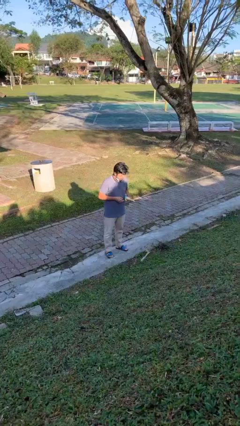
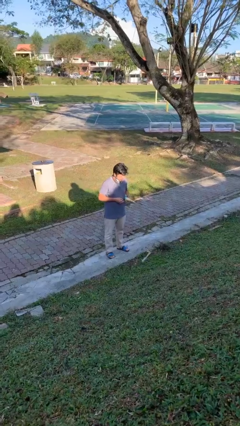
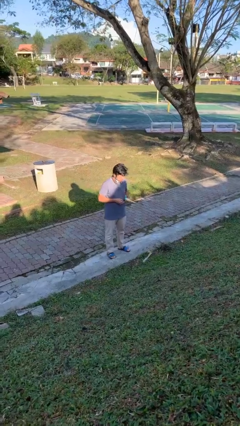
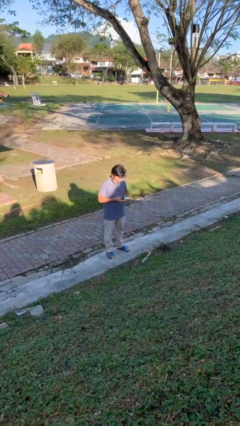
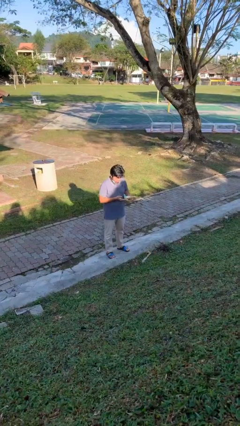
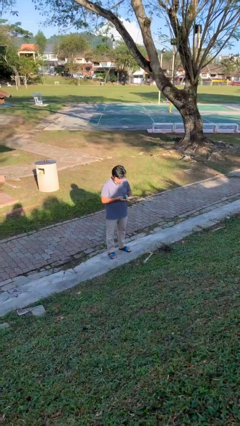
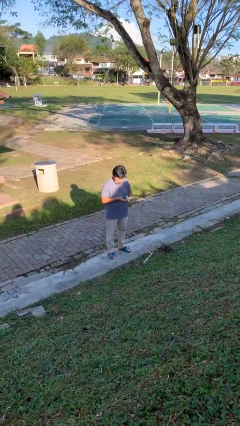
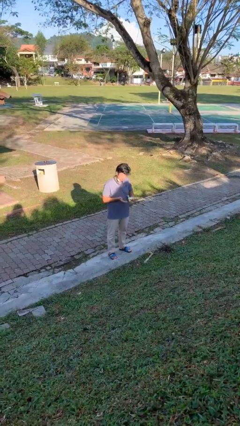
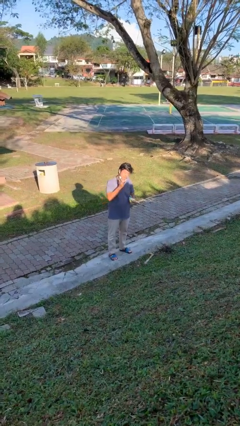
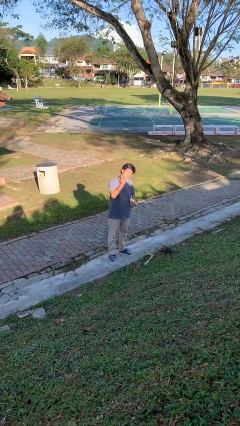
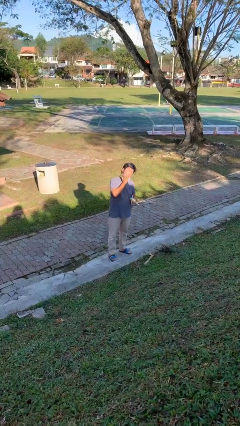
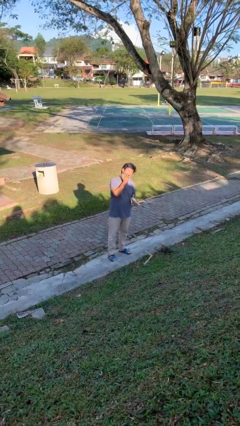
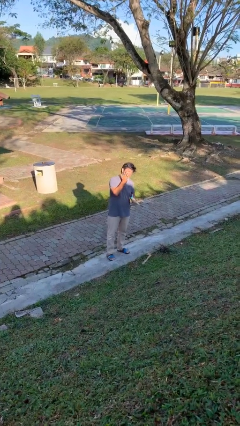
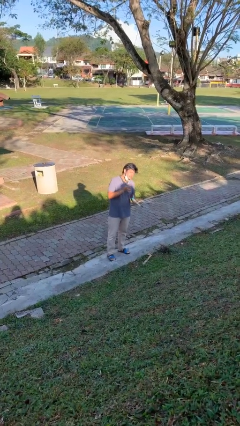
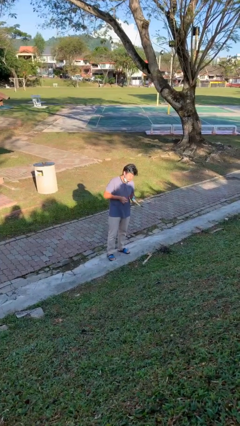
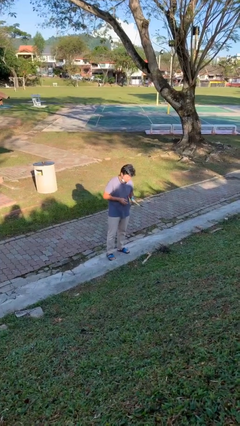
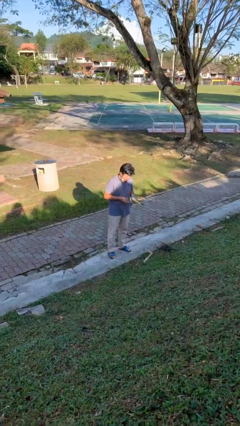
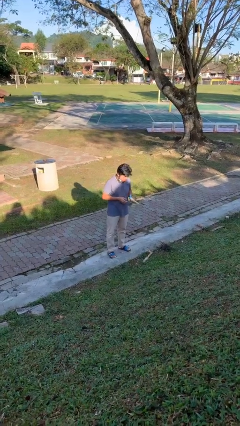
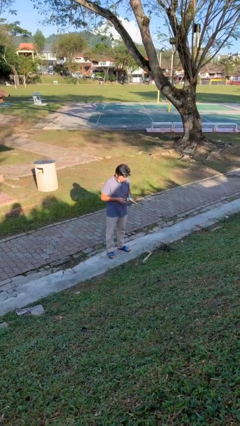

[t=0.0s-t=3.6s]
person applies facial moisturizer

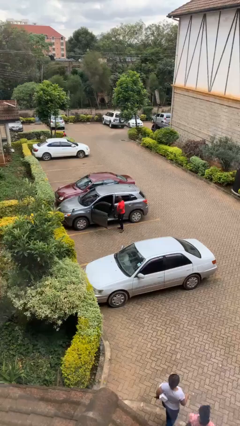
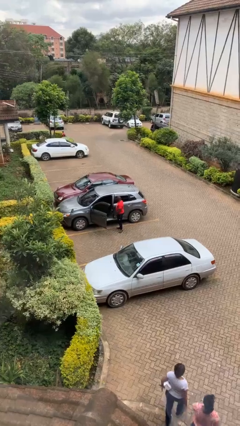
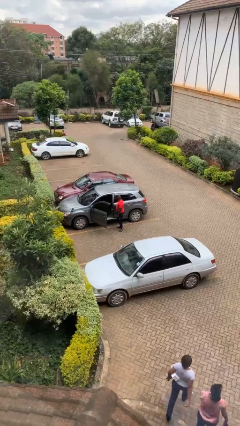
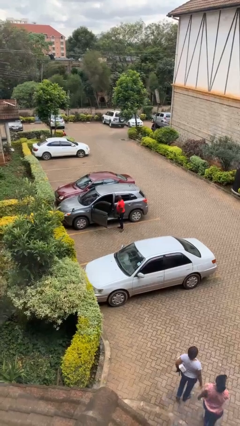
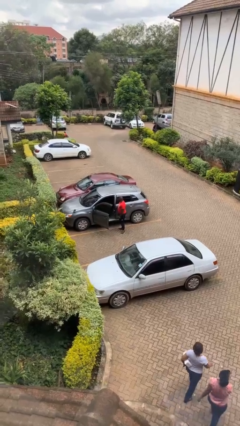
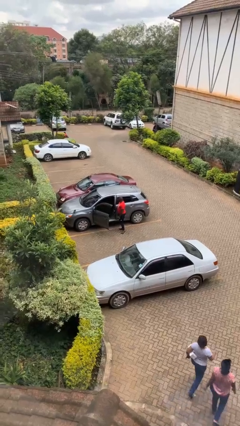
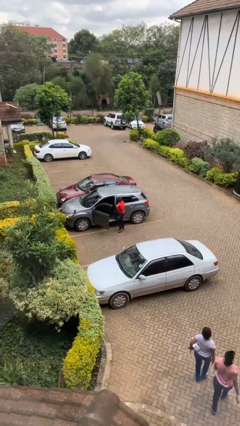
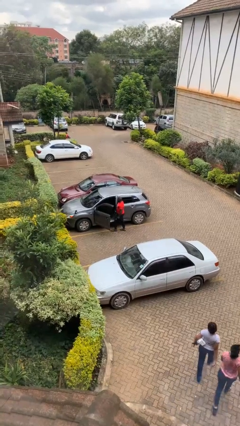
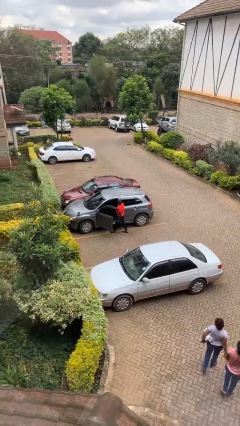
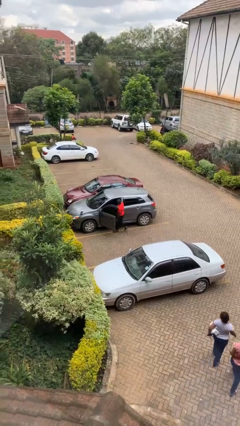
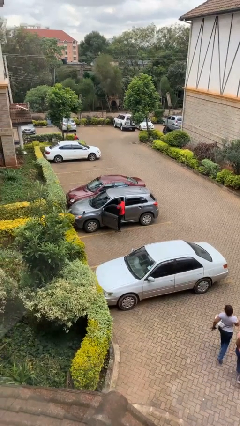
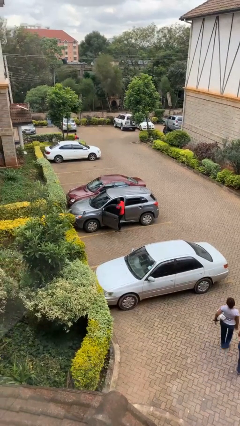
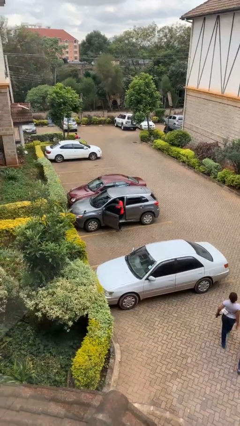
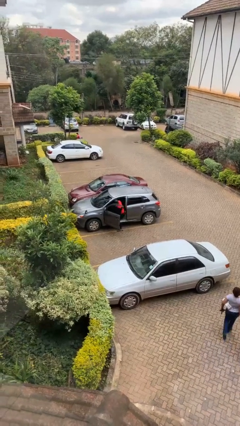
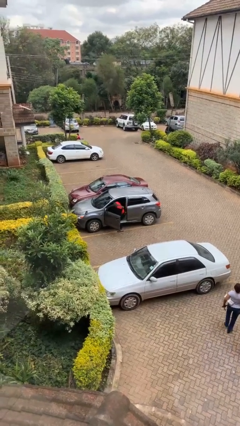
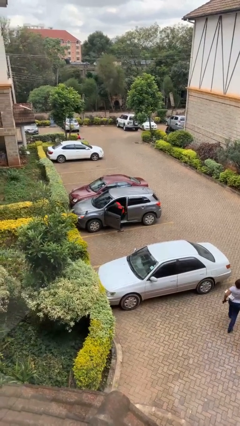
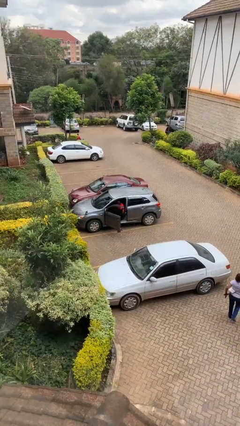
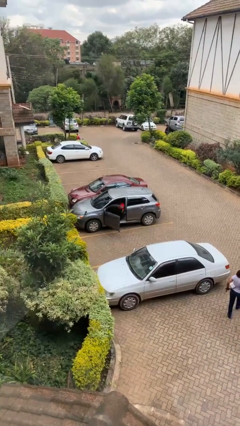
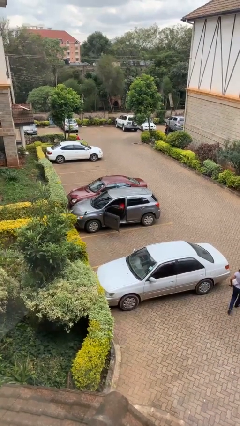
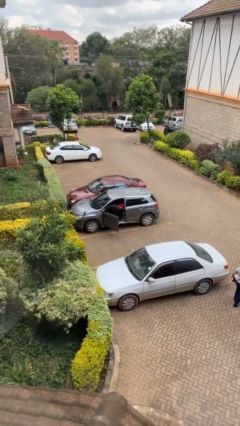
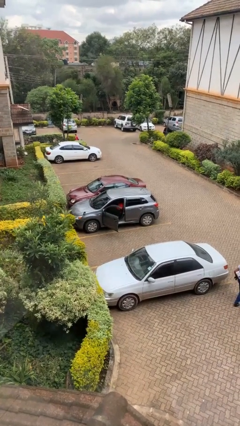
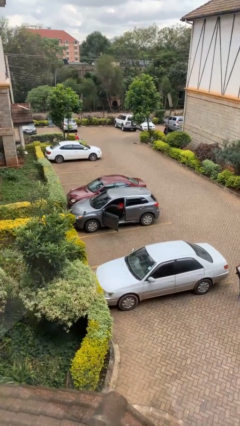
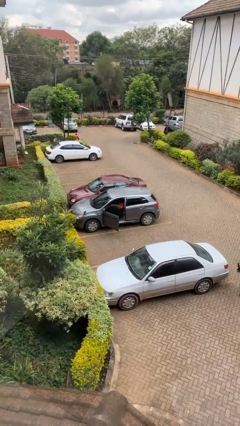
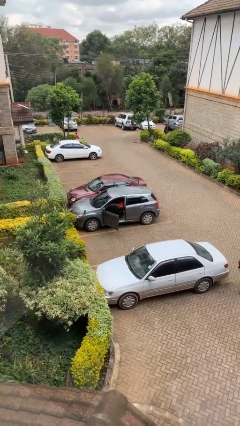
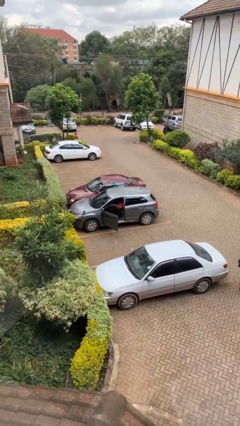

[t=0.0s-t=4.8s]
person enters car

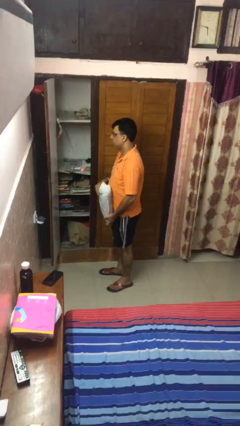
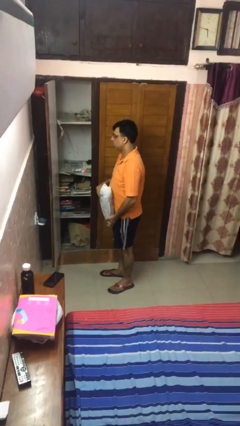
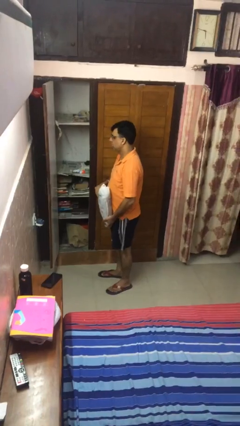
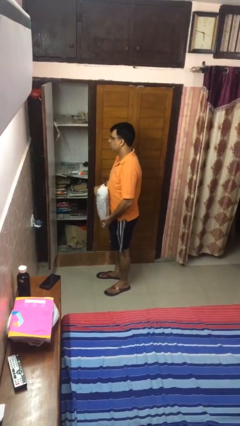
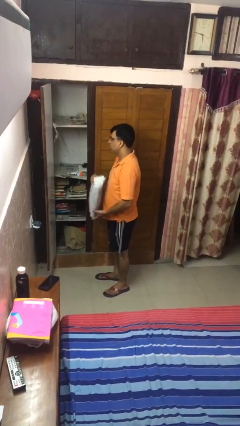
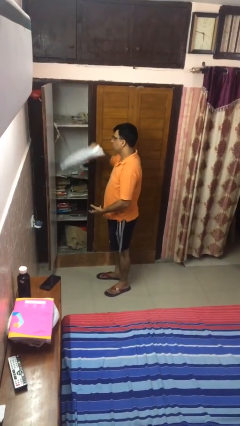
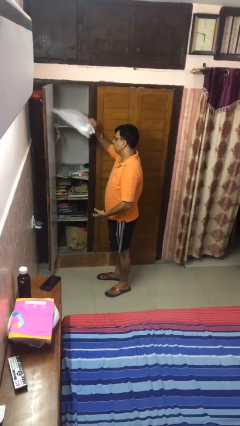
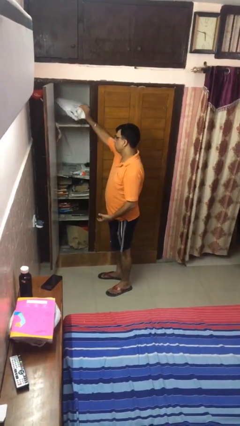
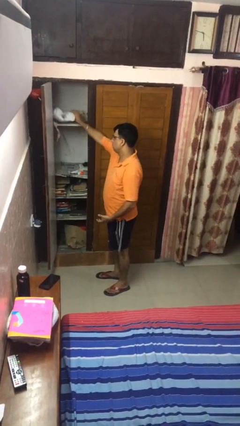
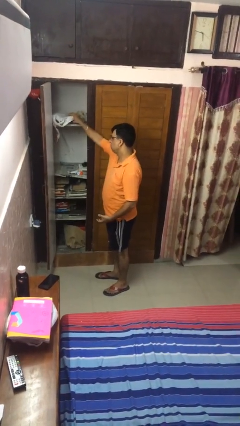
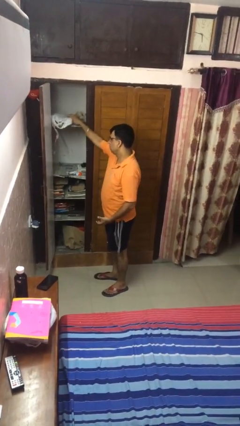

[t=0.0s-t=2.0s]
person puts down object on shelf

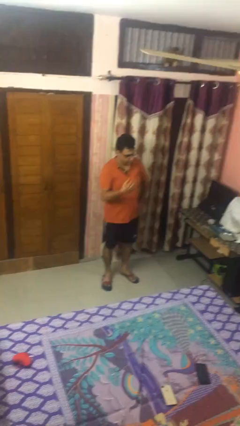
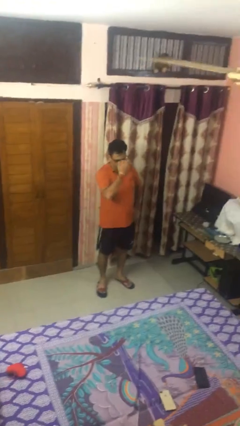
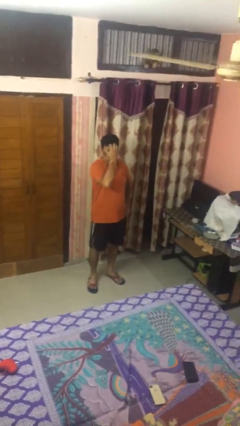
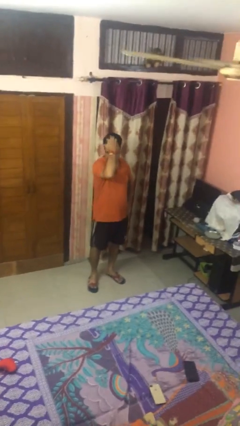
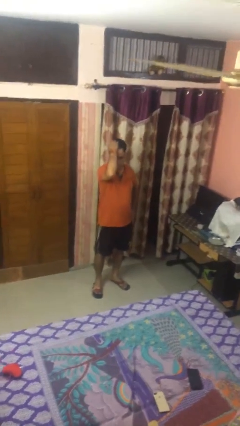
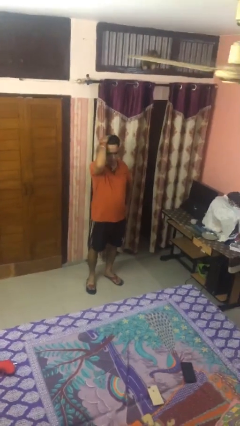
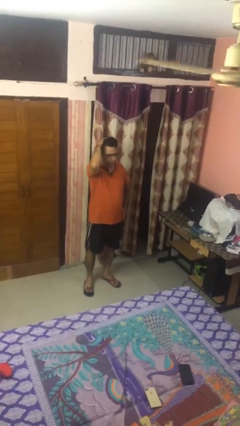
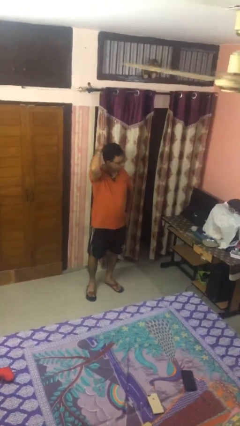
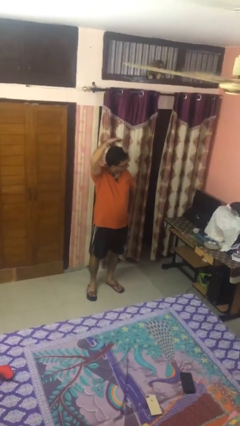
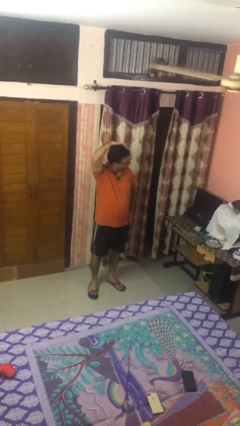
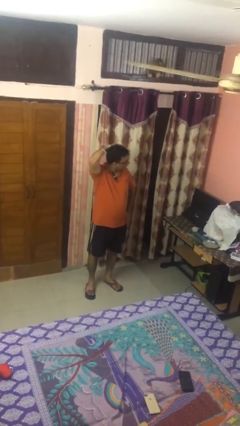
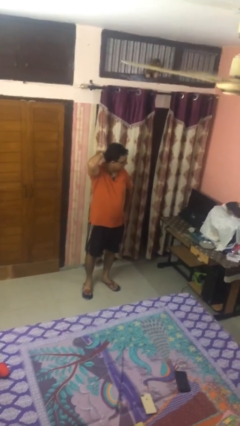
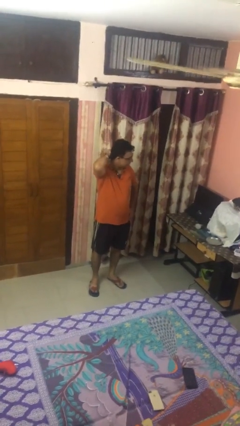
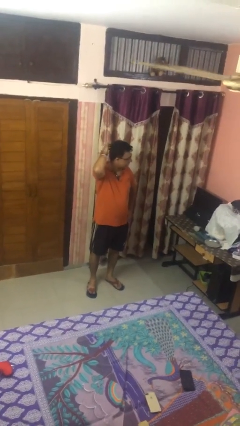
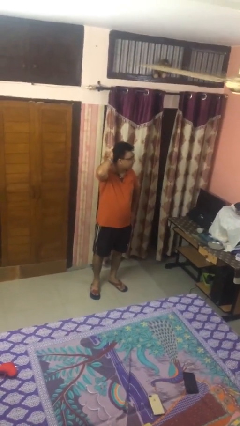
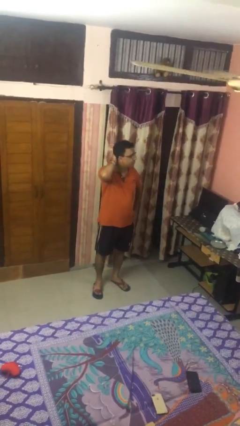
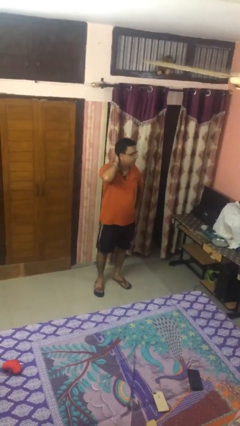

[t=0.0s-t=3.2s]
person strokes hair

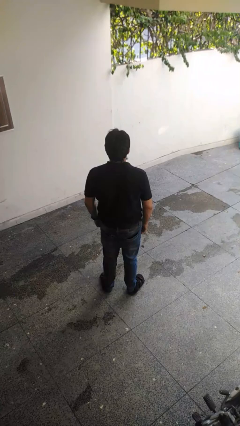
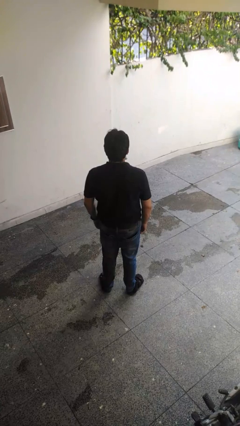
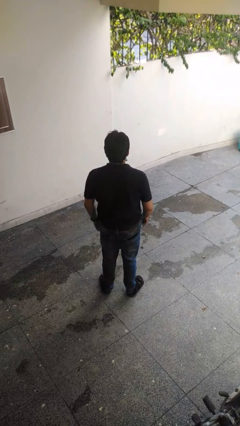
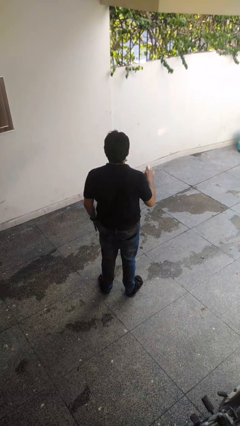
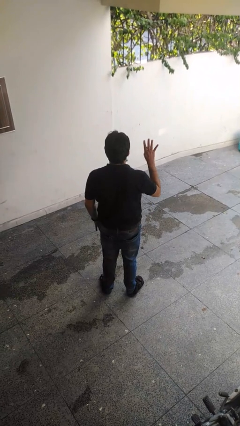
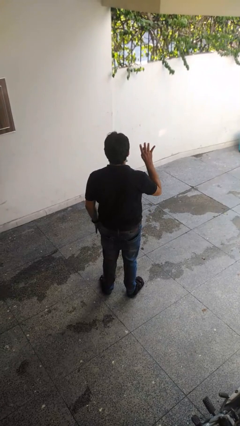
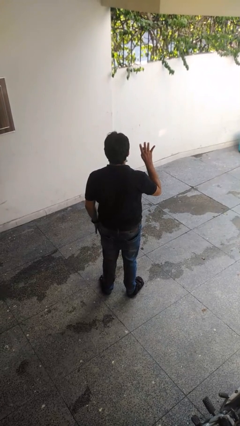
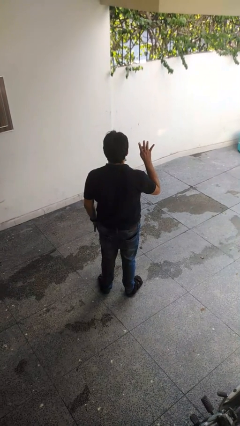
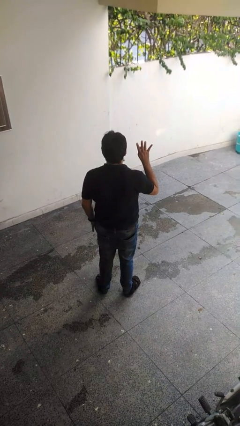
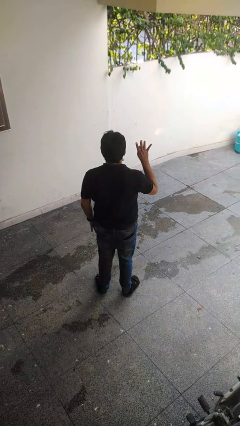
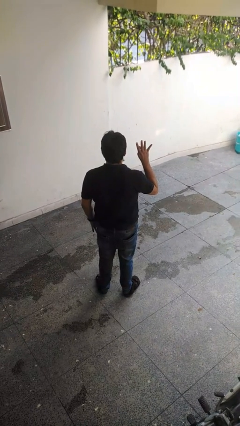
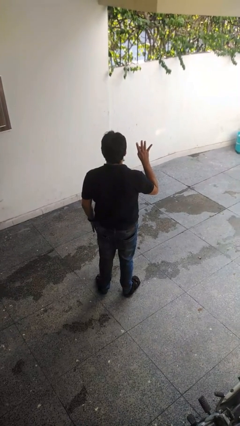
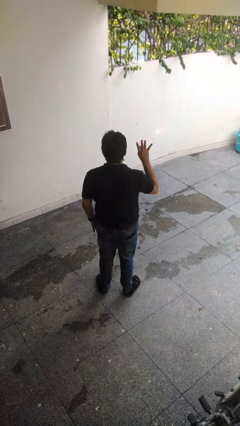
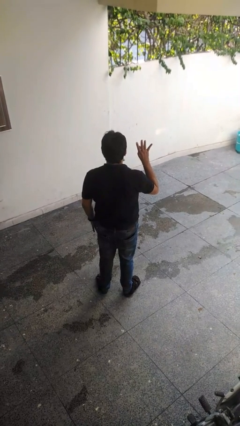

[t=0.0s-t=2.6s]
person gestures number four

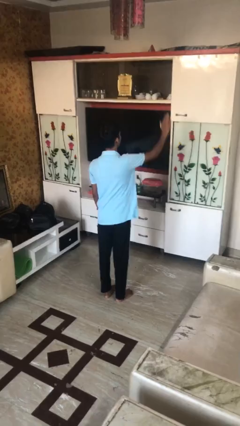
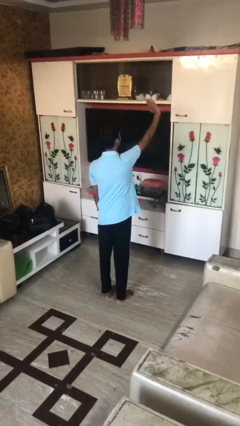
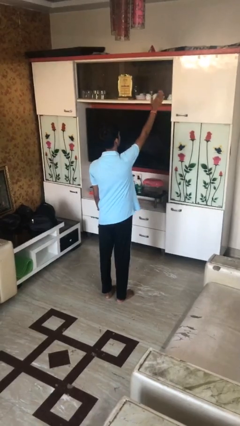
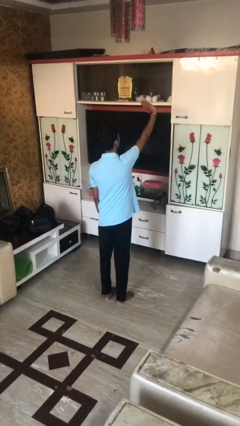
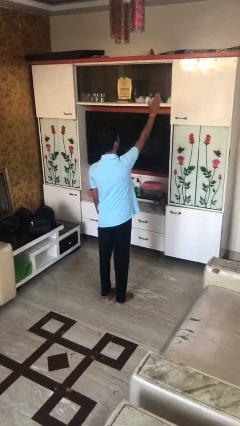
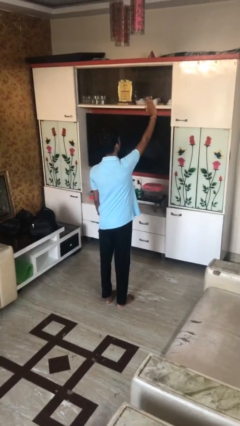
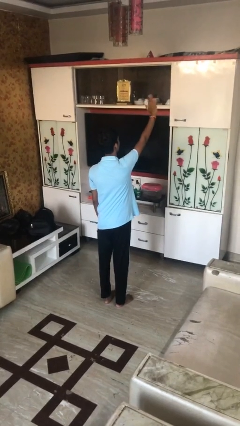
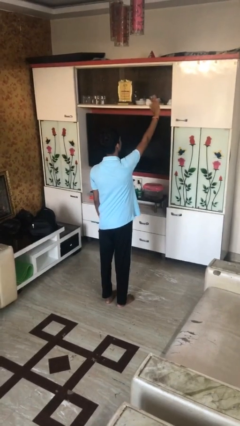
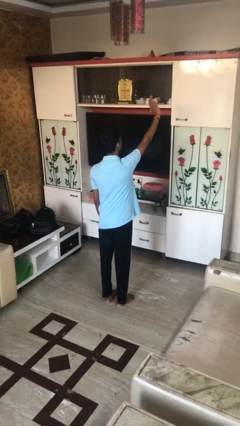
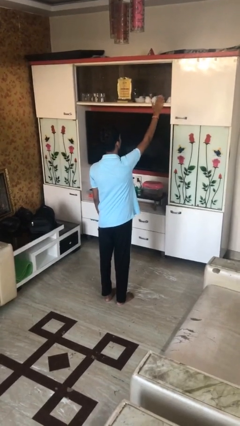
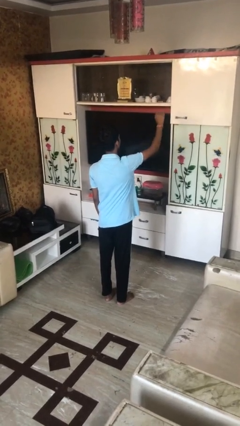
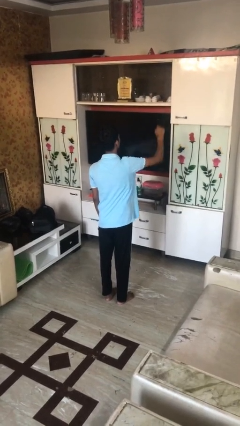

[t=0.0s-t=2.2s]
person waves at person
